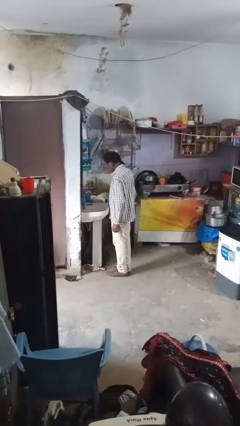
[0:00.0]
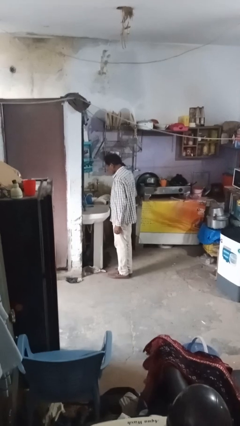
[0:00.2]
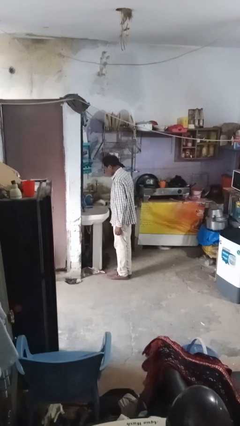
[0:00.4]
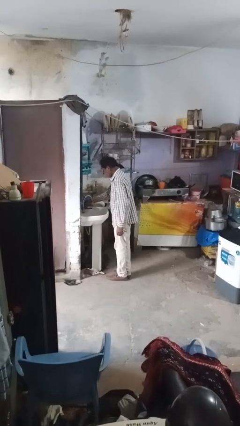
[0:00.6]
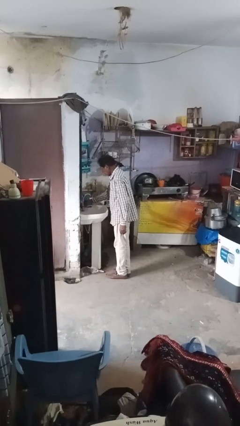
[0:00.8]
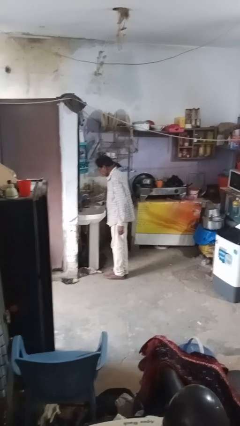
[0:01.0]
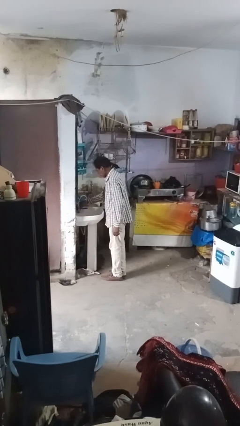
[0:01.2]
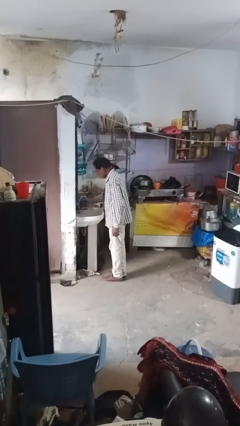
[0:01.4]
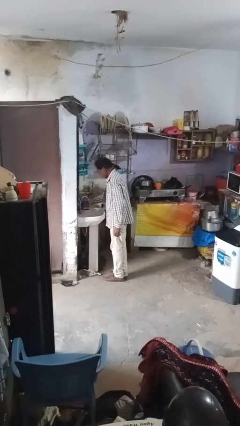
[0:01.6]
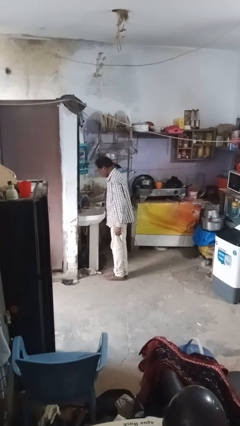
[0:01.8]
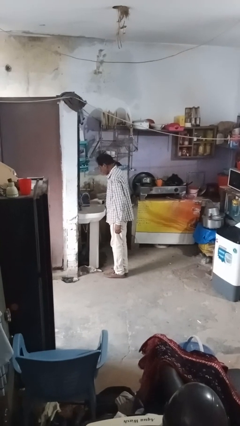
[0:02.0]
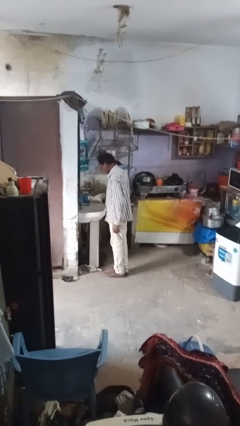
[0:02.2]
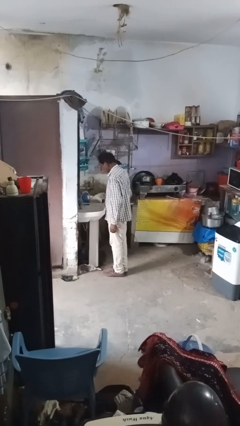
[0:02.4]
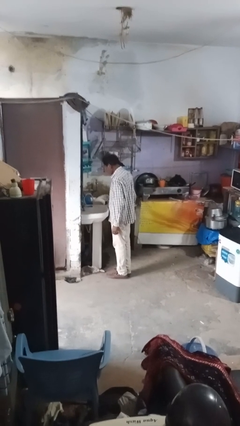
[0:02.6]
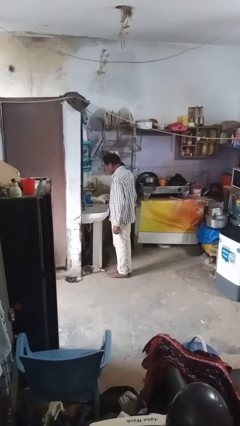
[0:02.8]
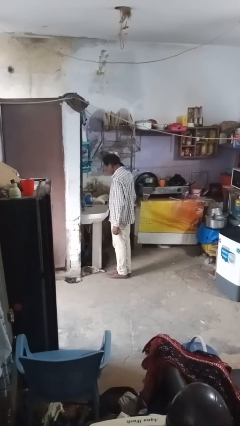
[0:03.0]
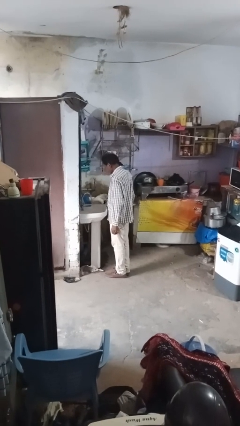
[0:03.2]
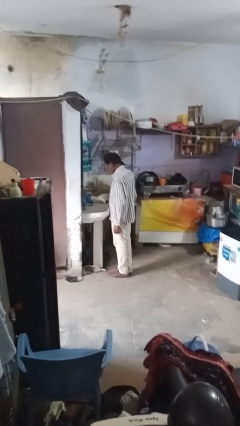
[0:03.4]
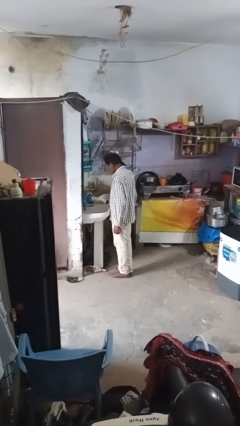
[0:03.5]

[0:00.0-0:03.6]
person turns on faucet

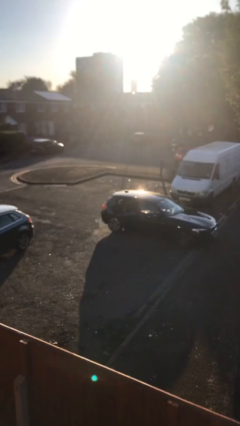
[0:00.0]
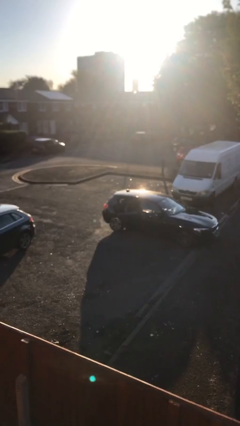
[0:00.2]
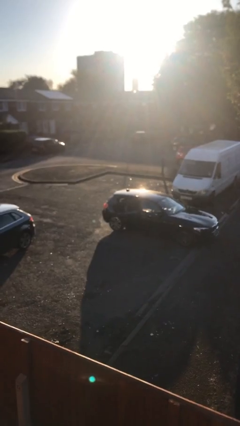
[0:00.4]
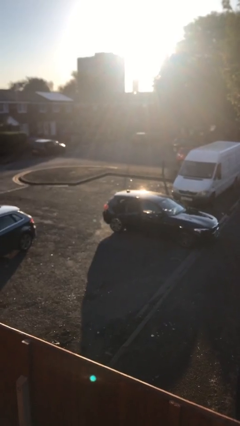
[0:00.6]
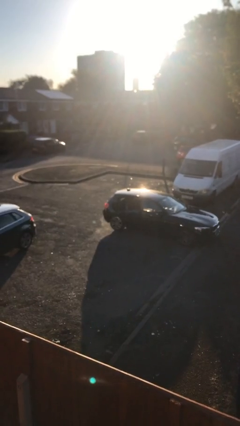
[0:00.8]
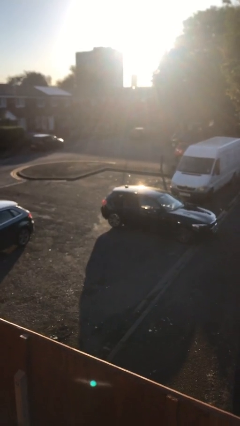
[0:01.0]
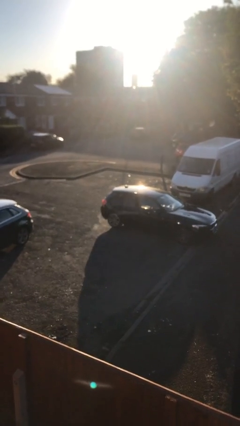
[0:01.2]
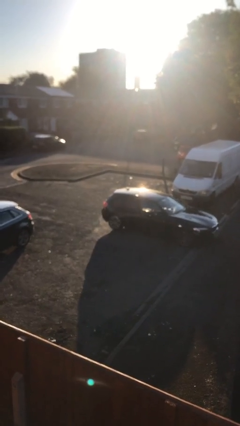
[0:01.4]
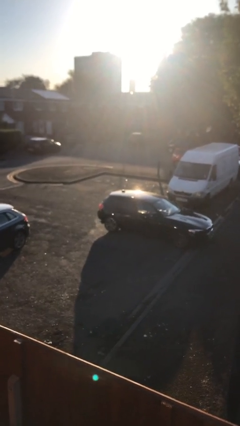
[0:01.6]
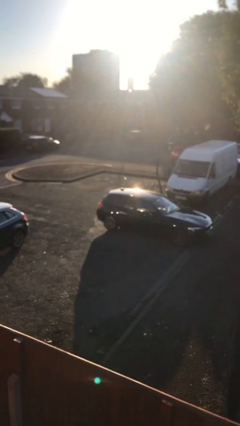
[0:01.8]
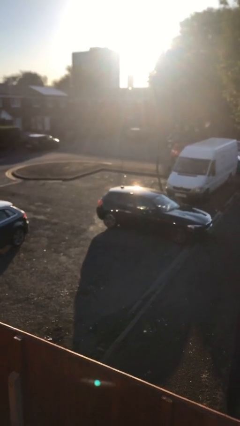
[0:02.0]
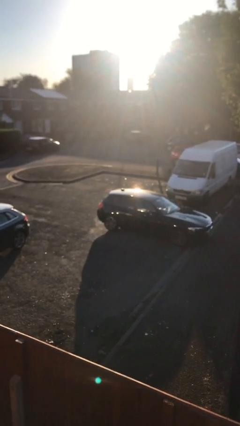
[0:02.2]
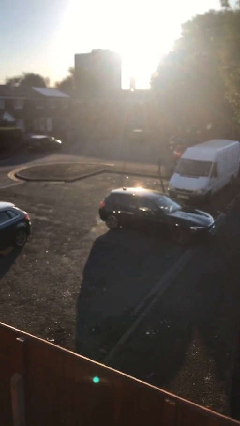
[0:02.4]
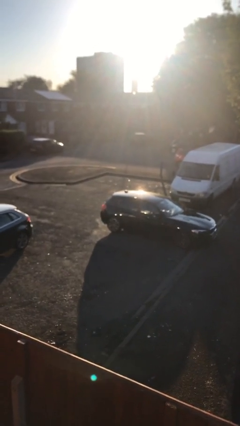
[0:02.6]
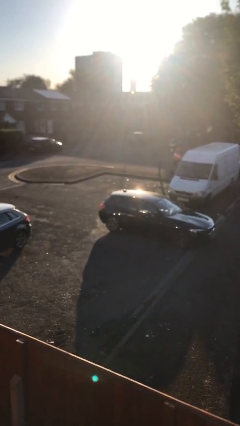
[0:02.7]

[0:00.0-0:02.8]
person closes car door

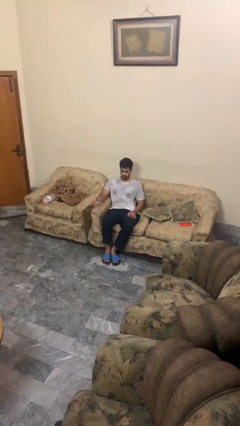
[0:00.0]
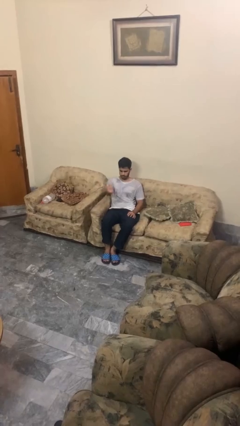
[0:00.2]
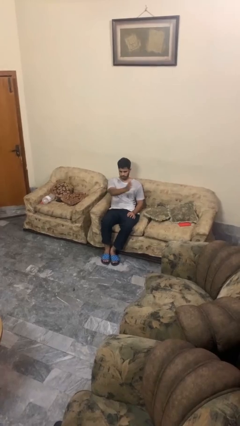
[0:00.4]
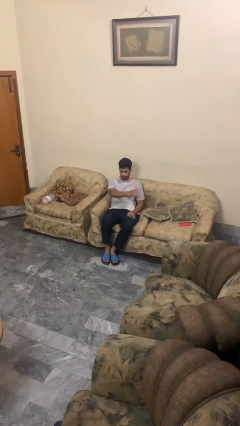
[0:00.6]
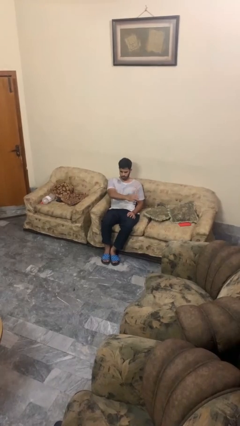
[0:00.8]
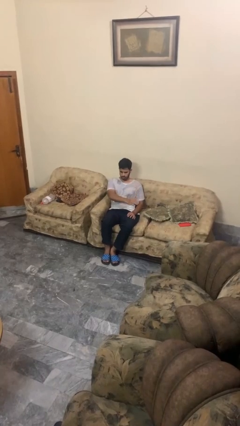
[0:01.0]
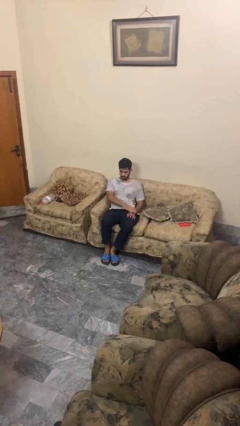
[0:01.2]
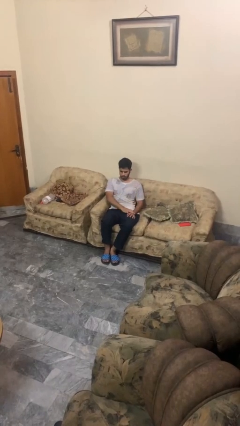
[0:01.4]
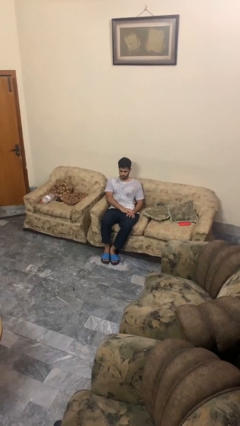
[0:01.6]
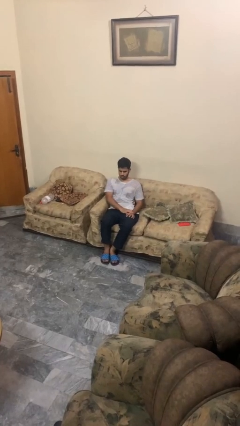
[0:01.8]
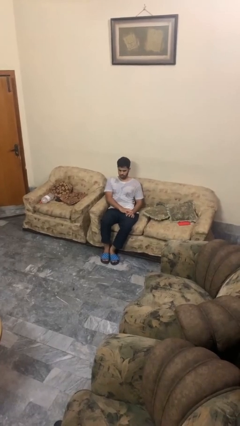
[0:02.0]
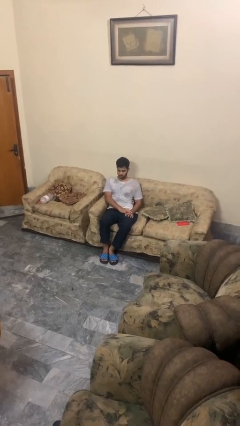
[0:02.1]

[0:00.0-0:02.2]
person gestures swipe left

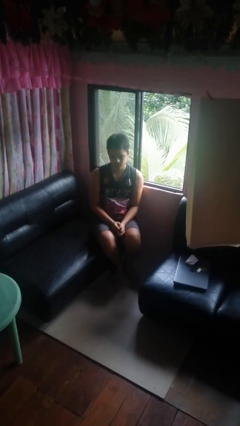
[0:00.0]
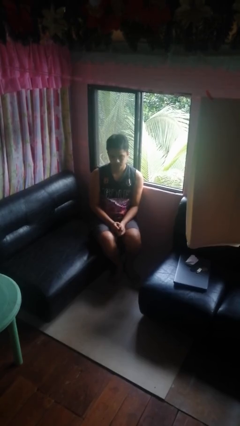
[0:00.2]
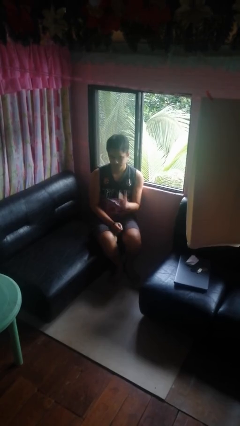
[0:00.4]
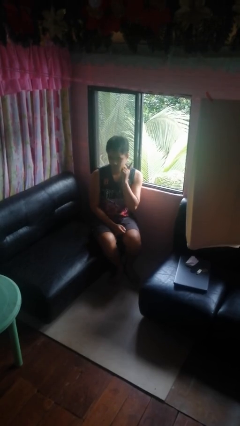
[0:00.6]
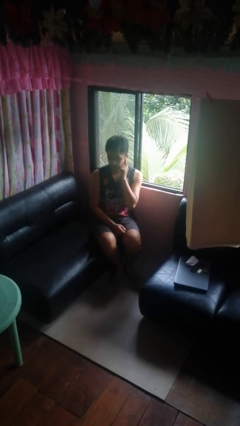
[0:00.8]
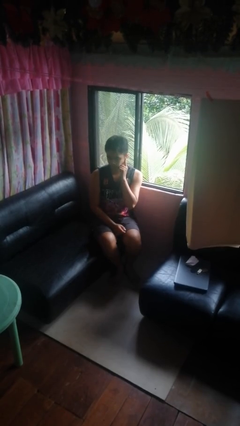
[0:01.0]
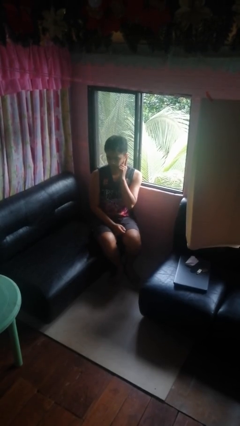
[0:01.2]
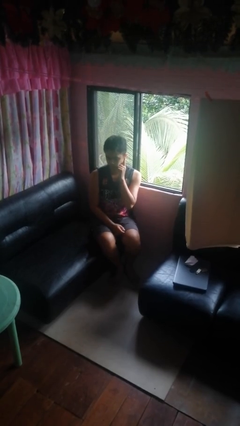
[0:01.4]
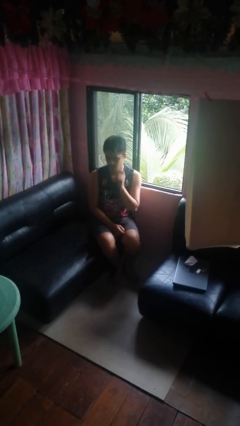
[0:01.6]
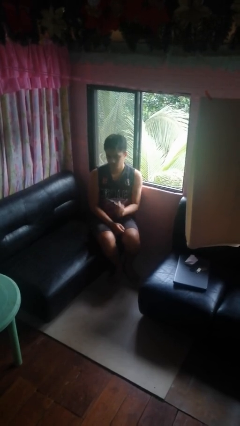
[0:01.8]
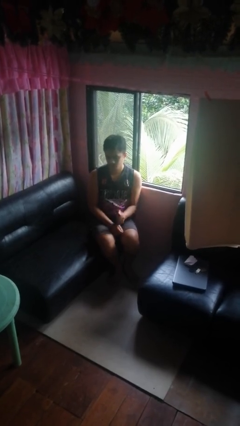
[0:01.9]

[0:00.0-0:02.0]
person gestures listen closely

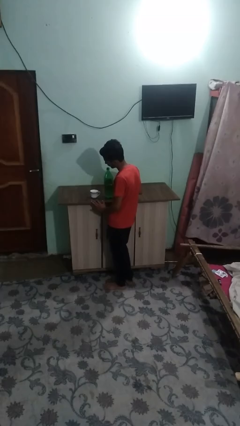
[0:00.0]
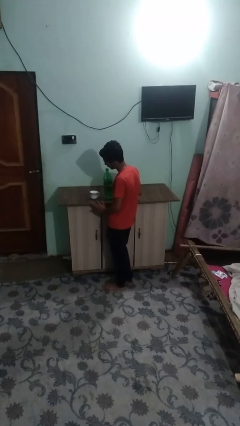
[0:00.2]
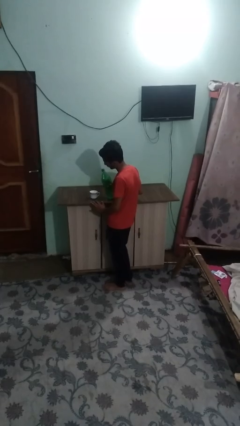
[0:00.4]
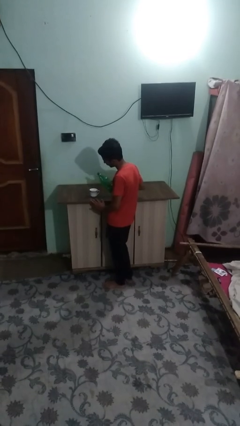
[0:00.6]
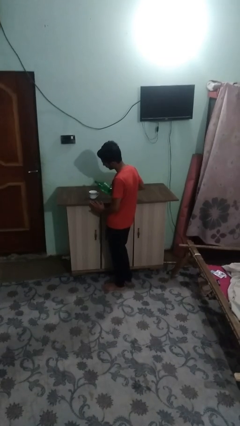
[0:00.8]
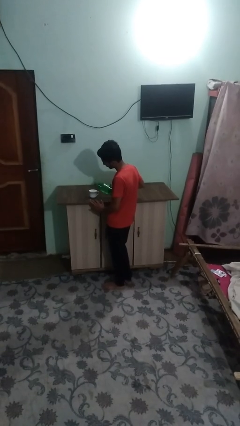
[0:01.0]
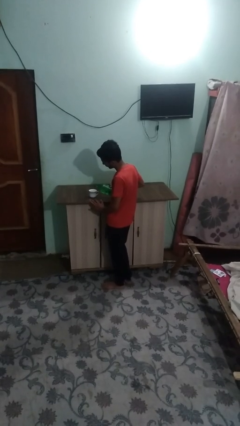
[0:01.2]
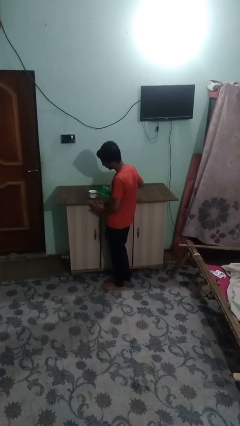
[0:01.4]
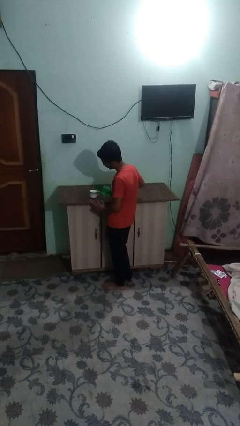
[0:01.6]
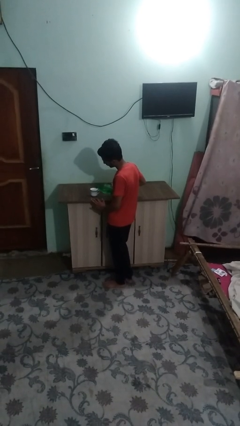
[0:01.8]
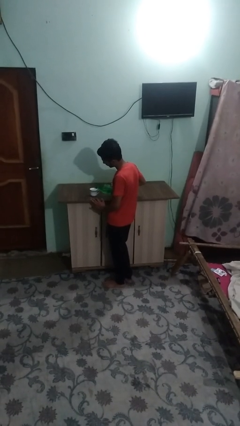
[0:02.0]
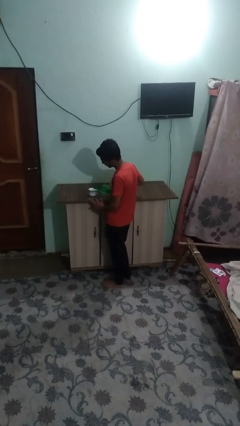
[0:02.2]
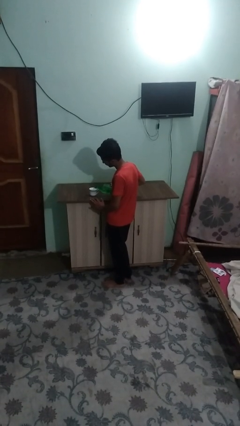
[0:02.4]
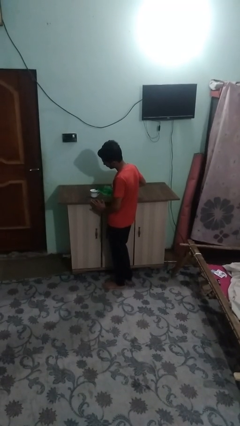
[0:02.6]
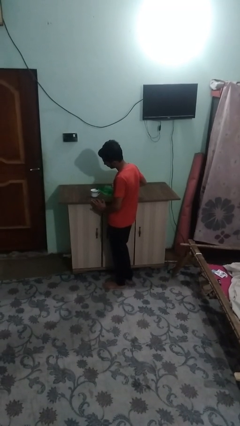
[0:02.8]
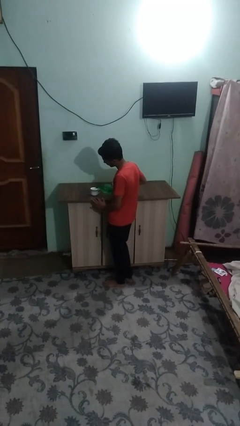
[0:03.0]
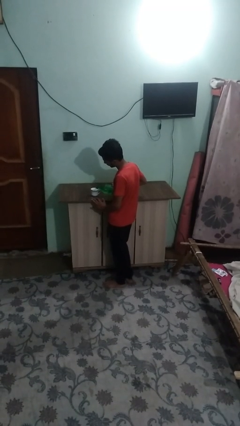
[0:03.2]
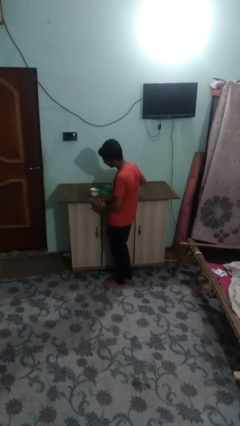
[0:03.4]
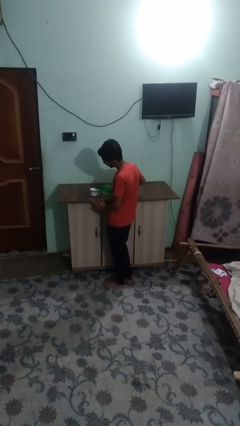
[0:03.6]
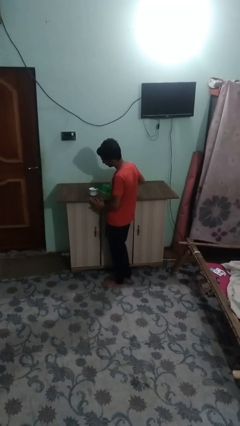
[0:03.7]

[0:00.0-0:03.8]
person pours liquid into cup

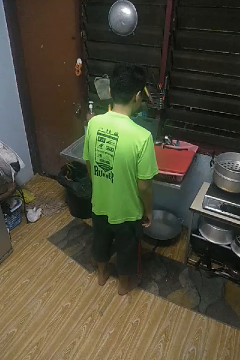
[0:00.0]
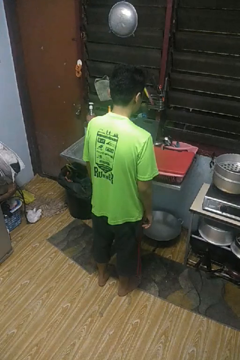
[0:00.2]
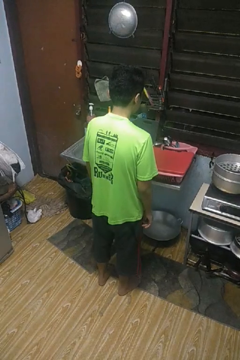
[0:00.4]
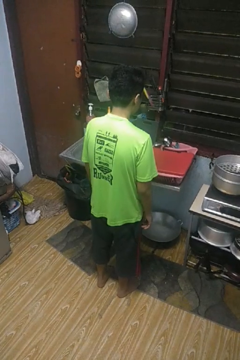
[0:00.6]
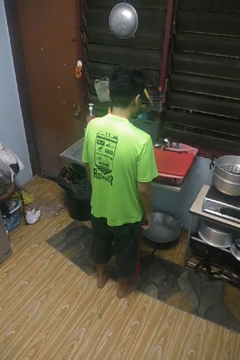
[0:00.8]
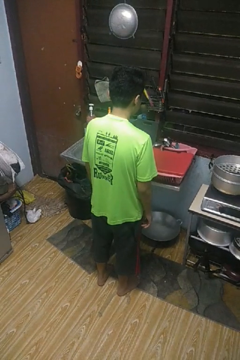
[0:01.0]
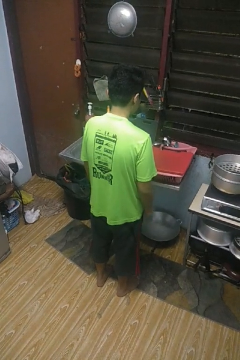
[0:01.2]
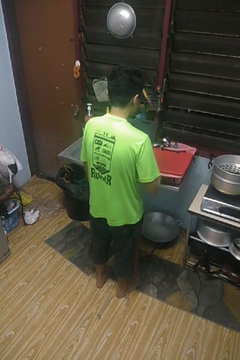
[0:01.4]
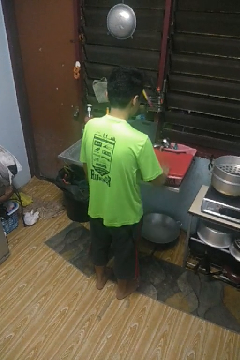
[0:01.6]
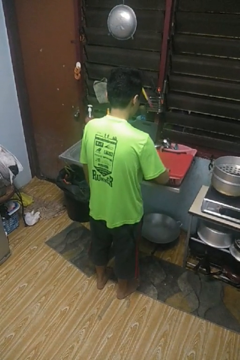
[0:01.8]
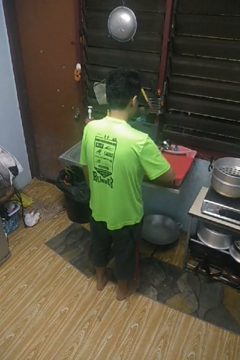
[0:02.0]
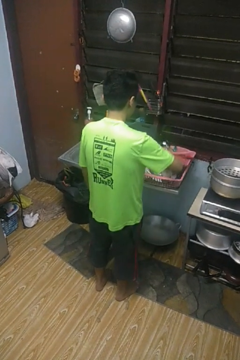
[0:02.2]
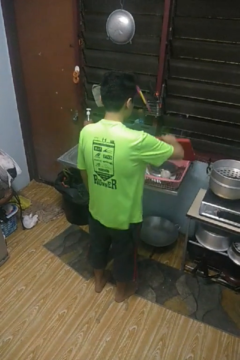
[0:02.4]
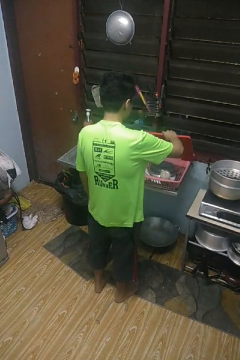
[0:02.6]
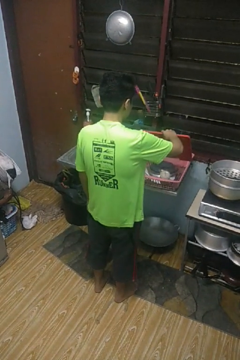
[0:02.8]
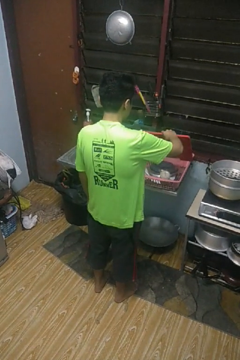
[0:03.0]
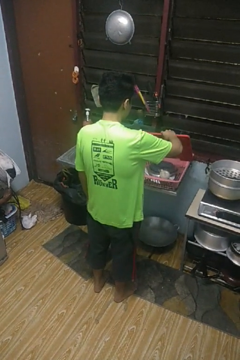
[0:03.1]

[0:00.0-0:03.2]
person opens dishwasher

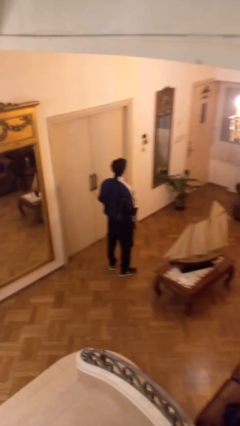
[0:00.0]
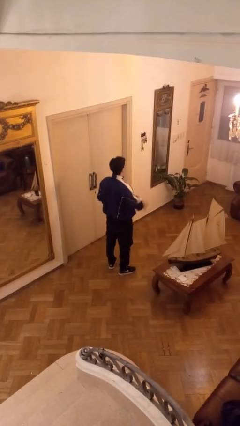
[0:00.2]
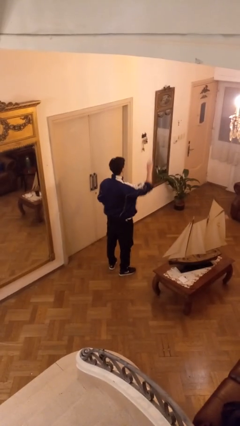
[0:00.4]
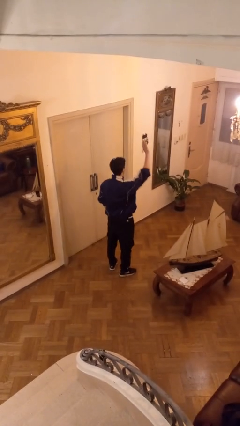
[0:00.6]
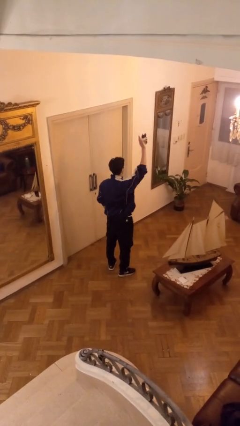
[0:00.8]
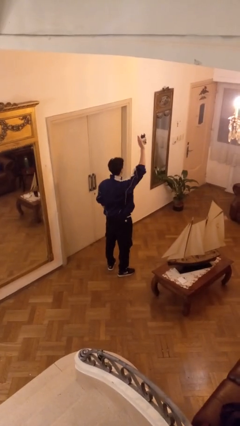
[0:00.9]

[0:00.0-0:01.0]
person gestures raise hand
